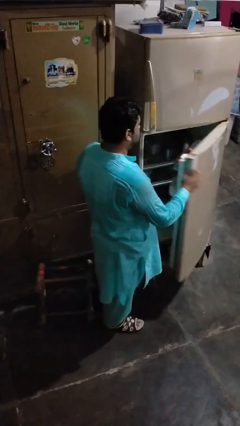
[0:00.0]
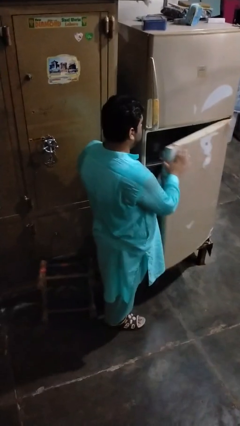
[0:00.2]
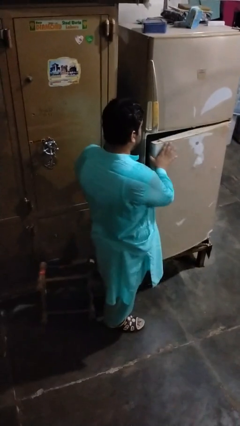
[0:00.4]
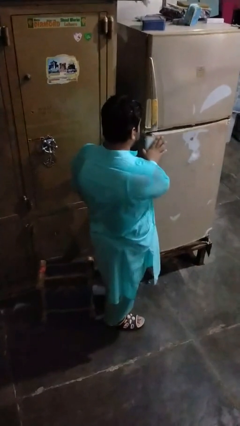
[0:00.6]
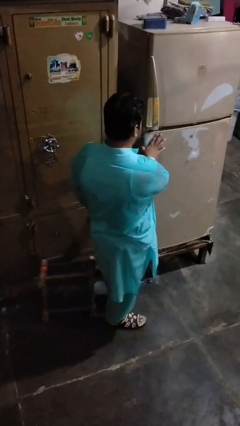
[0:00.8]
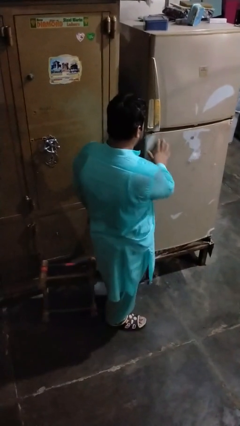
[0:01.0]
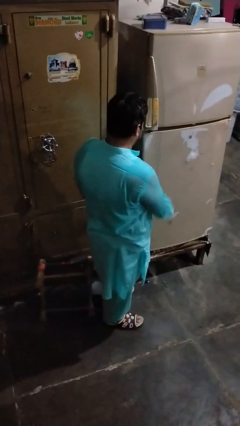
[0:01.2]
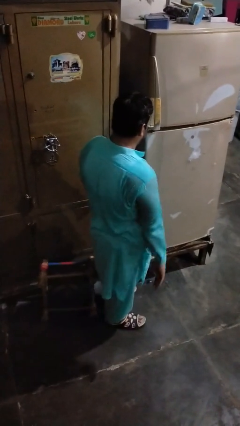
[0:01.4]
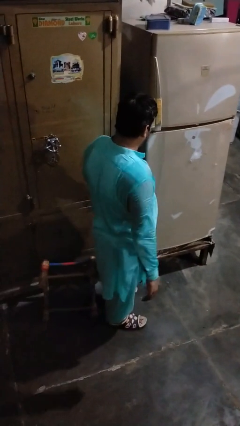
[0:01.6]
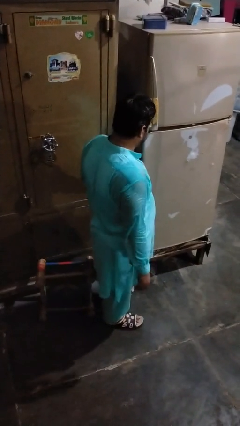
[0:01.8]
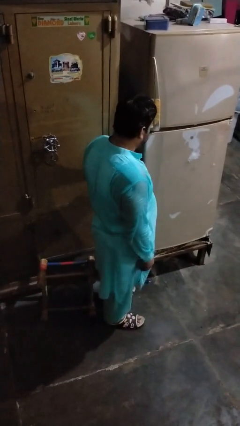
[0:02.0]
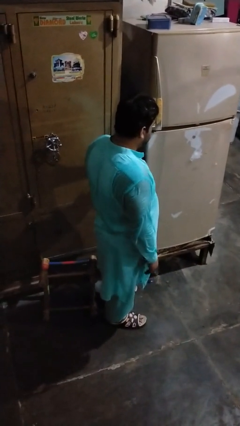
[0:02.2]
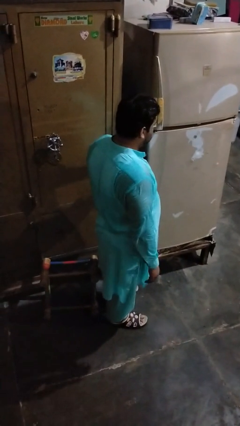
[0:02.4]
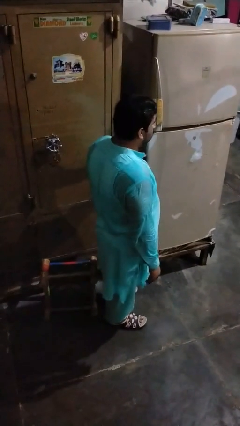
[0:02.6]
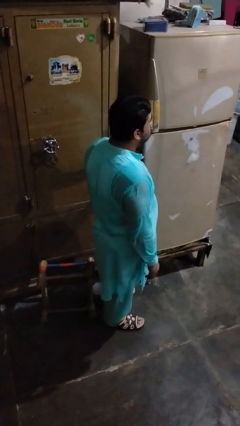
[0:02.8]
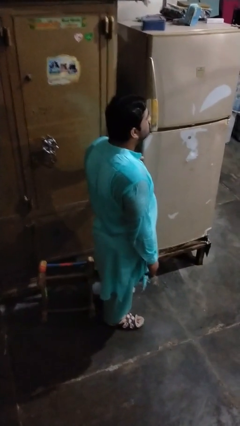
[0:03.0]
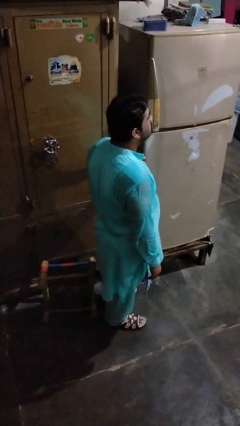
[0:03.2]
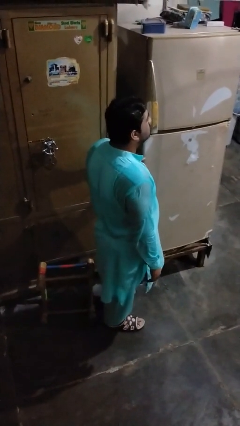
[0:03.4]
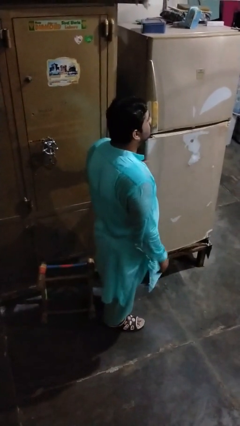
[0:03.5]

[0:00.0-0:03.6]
person closes refrigerator

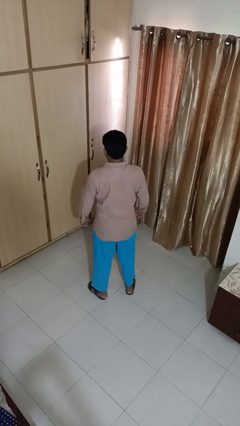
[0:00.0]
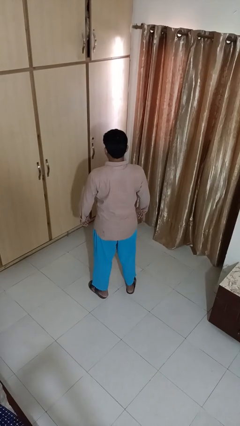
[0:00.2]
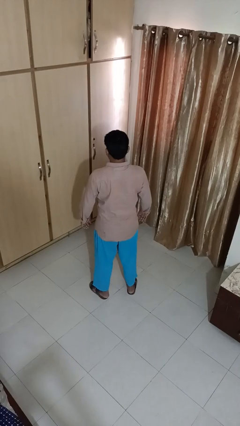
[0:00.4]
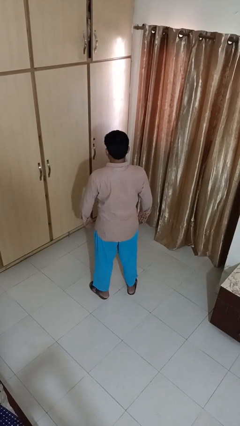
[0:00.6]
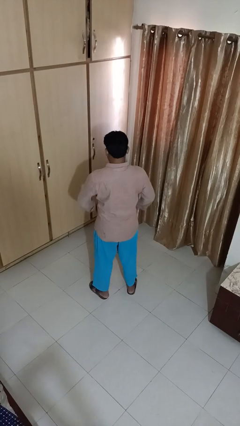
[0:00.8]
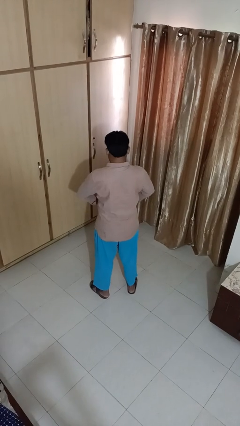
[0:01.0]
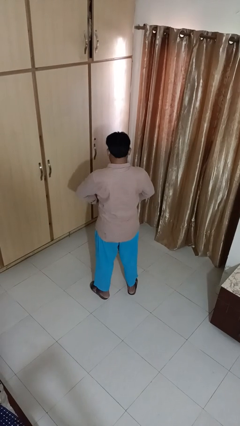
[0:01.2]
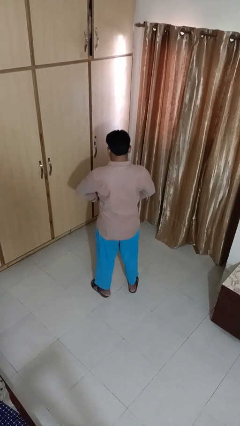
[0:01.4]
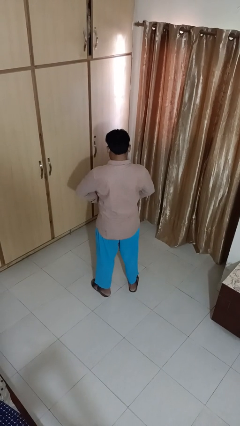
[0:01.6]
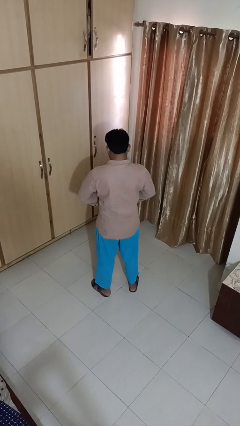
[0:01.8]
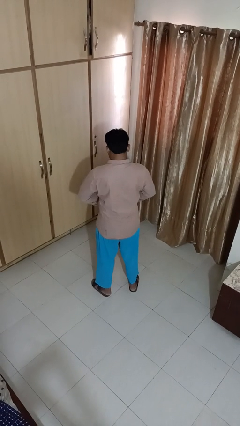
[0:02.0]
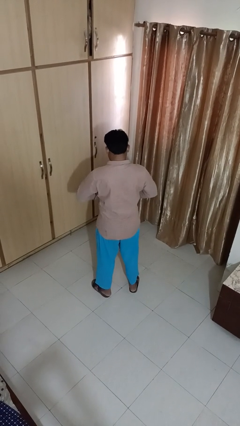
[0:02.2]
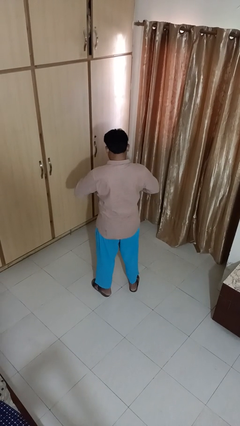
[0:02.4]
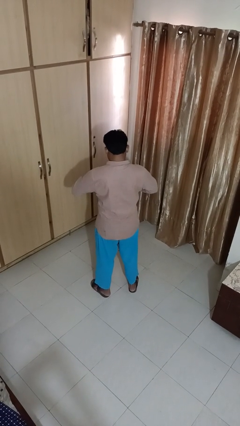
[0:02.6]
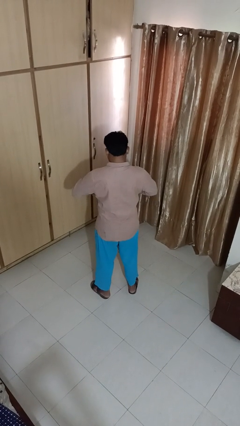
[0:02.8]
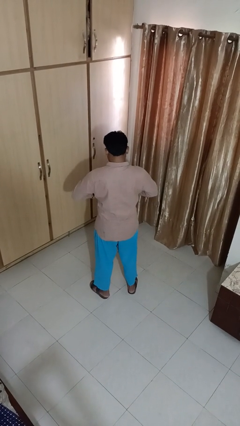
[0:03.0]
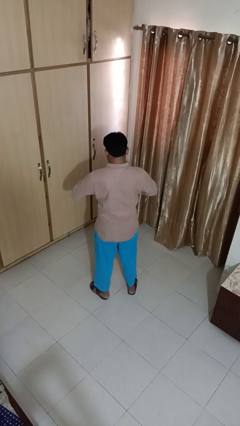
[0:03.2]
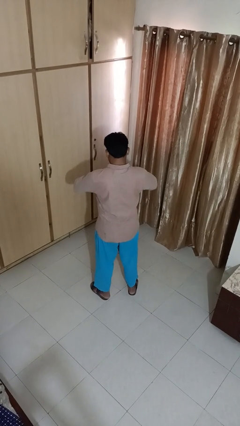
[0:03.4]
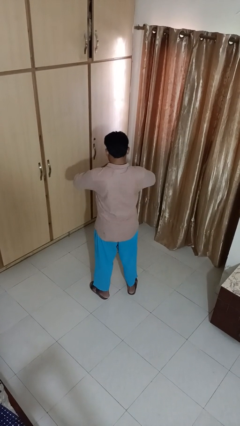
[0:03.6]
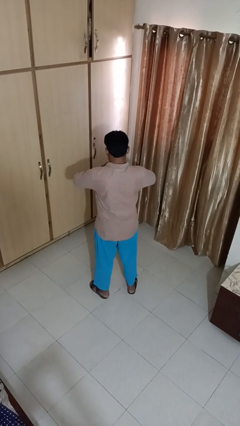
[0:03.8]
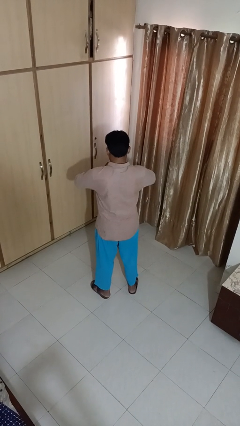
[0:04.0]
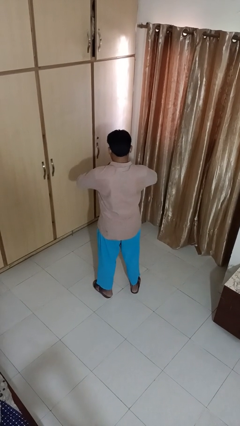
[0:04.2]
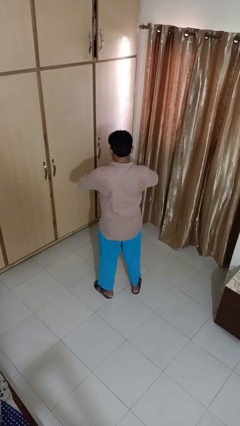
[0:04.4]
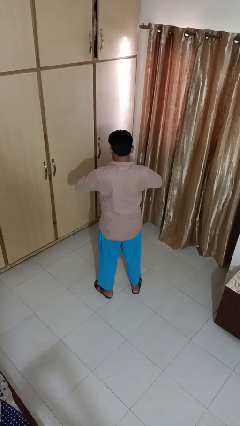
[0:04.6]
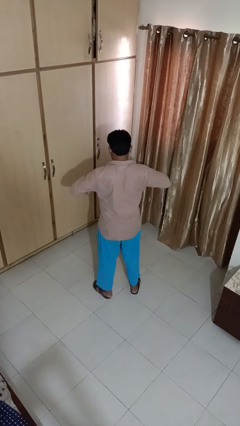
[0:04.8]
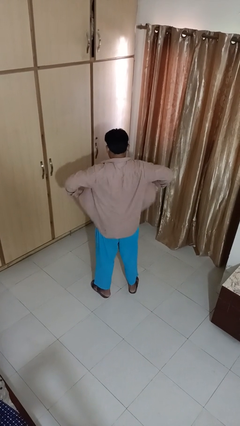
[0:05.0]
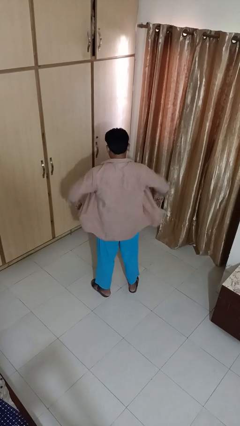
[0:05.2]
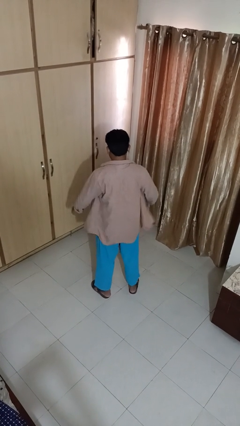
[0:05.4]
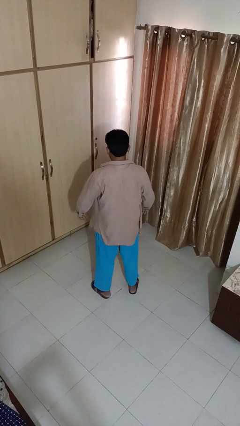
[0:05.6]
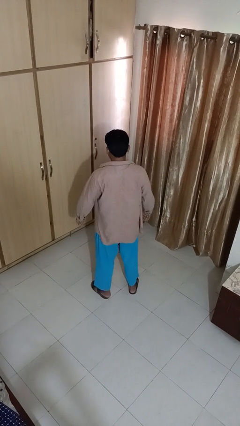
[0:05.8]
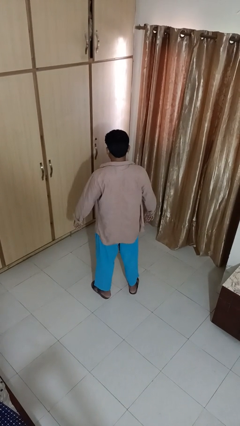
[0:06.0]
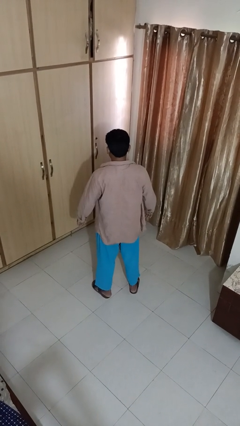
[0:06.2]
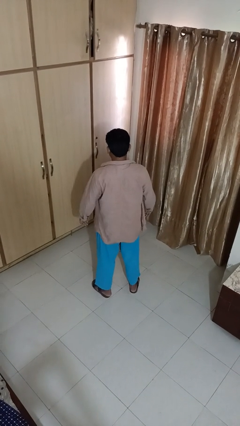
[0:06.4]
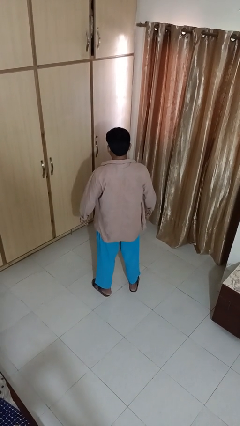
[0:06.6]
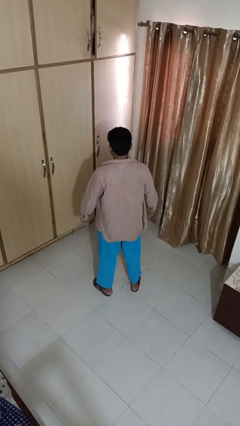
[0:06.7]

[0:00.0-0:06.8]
person unbuttons shirt

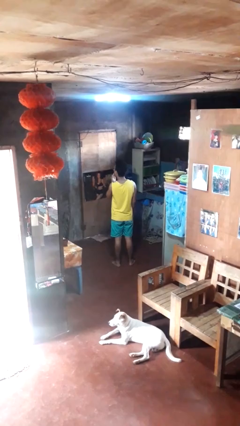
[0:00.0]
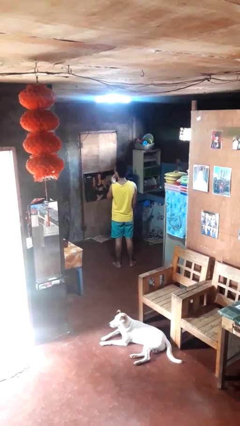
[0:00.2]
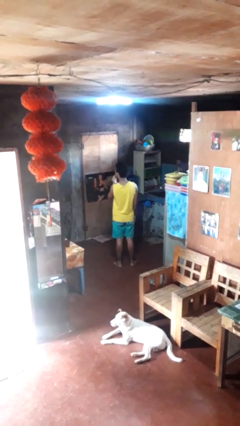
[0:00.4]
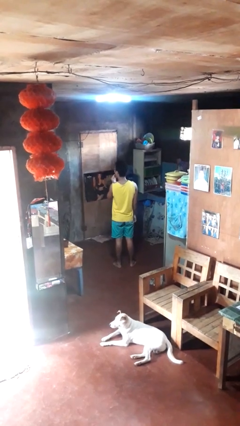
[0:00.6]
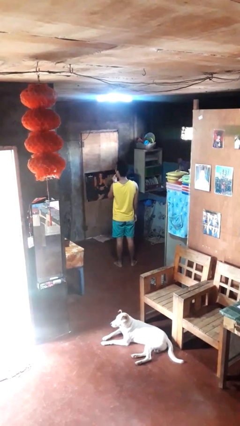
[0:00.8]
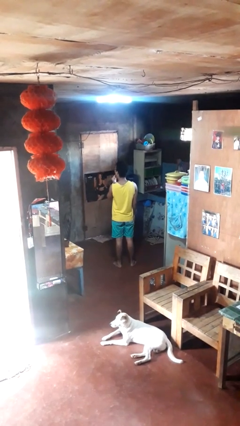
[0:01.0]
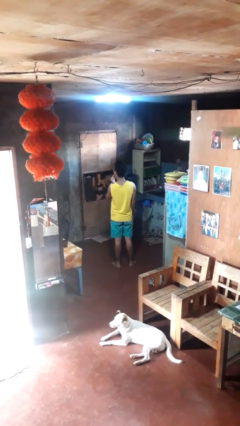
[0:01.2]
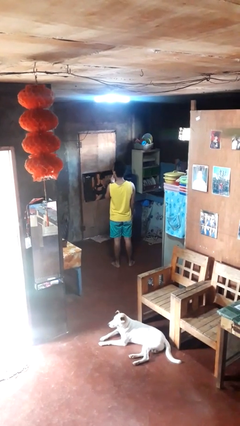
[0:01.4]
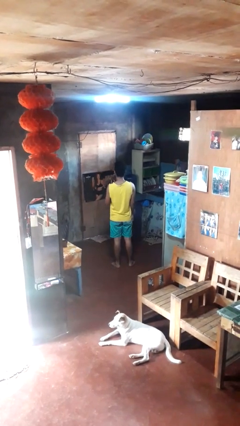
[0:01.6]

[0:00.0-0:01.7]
person licks fingers

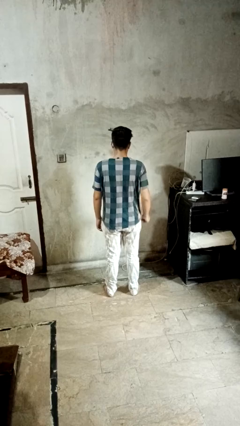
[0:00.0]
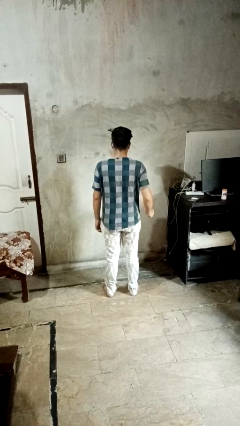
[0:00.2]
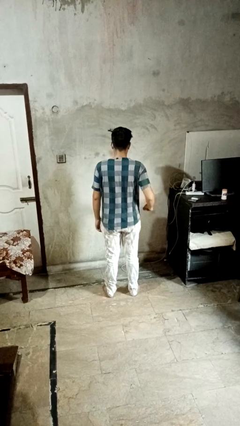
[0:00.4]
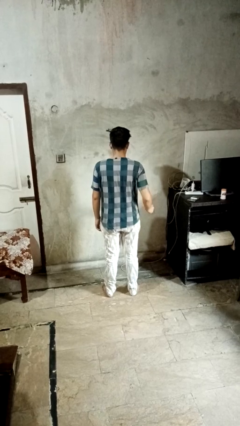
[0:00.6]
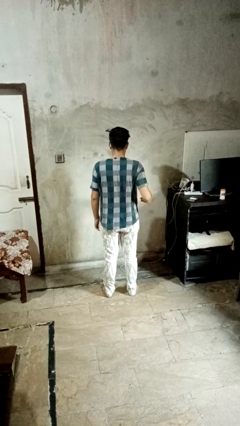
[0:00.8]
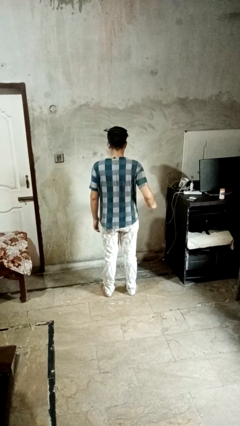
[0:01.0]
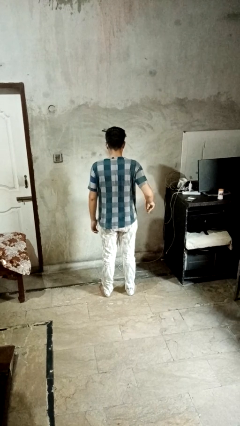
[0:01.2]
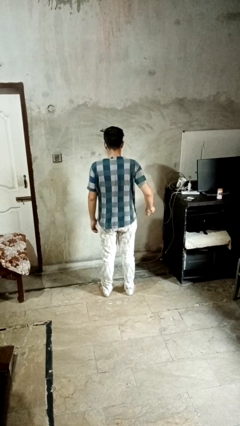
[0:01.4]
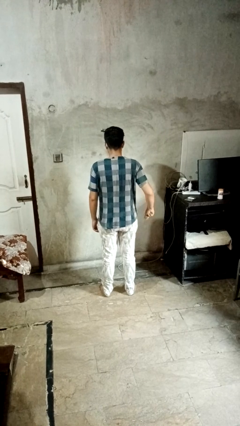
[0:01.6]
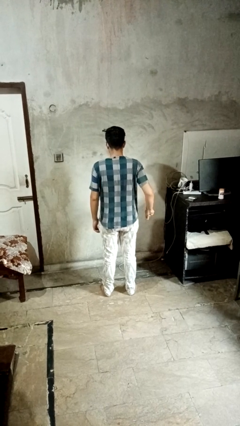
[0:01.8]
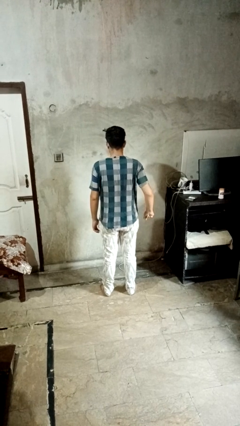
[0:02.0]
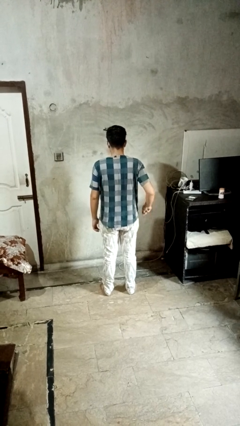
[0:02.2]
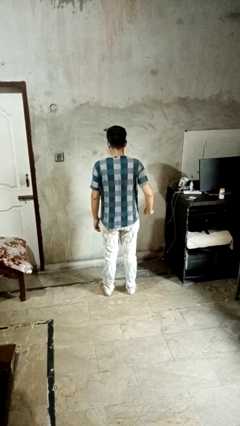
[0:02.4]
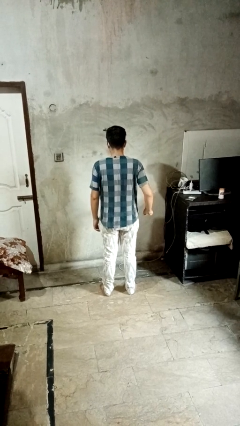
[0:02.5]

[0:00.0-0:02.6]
person snaps fingers

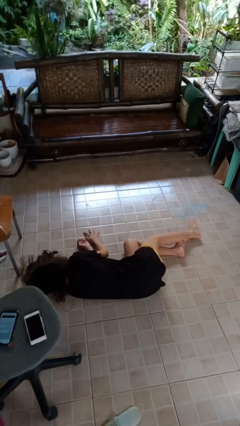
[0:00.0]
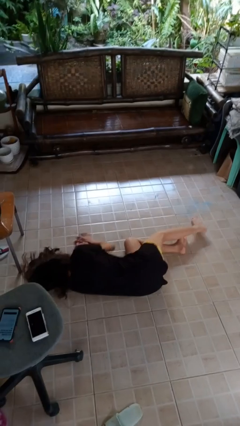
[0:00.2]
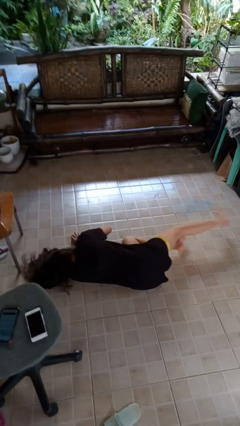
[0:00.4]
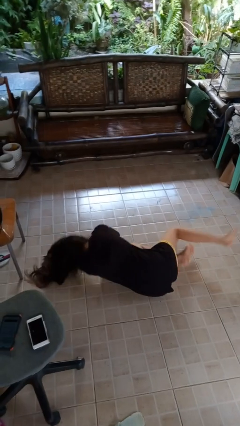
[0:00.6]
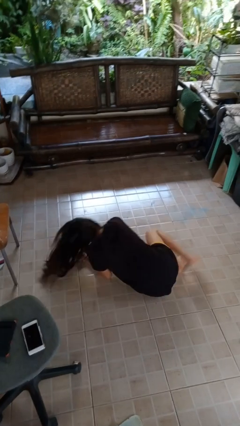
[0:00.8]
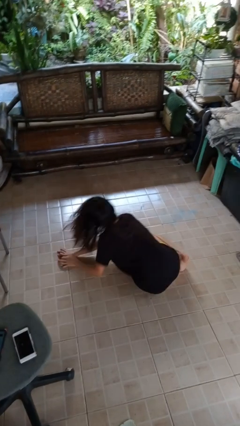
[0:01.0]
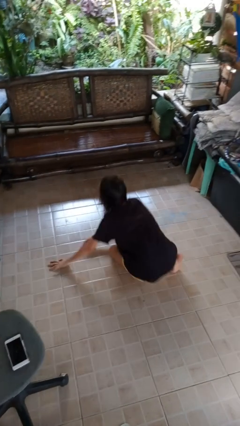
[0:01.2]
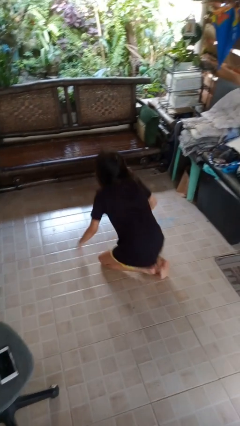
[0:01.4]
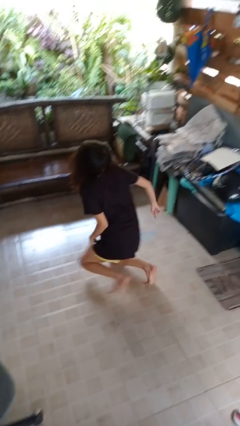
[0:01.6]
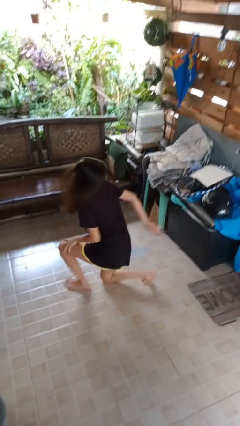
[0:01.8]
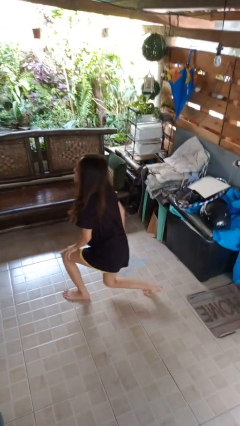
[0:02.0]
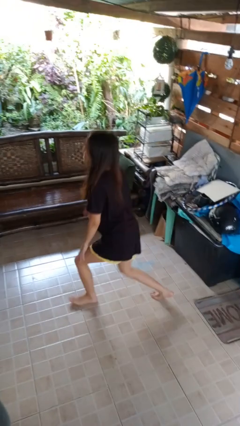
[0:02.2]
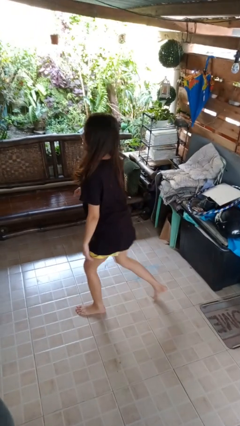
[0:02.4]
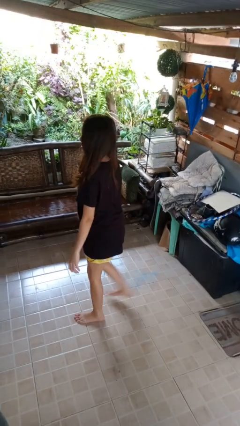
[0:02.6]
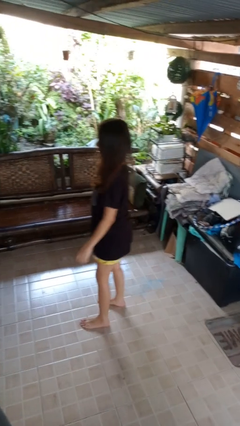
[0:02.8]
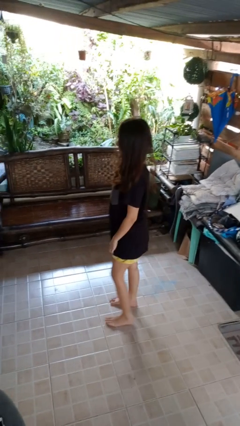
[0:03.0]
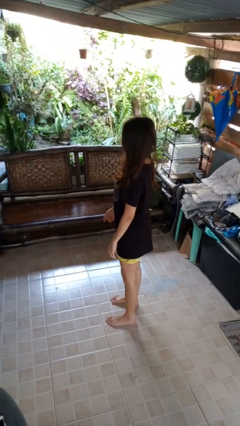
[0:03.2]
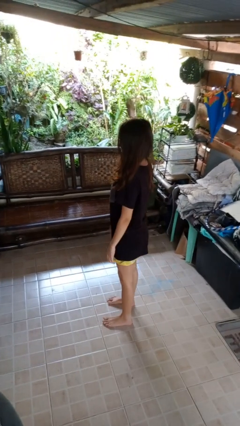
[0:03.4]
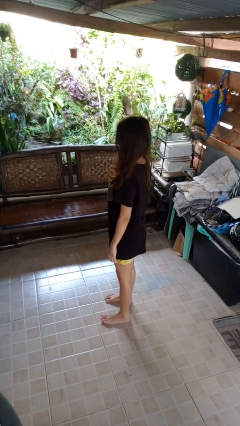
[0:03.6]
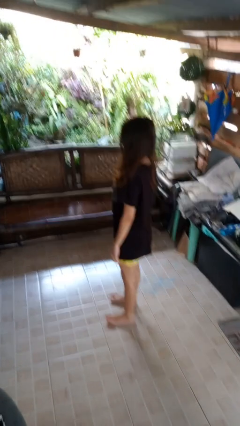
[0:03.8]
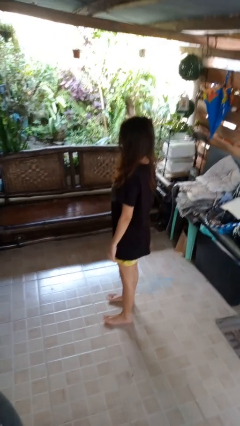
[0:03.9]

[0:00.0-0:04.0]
person stands up from floor
